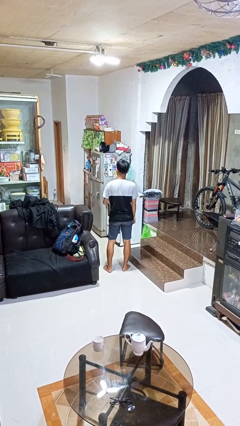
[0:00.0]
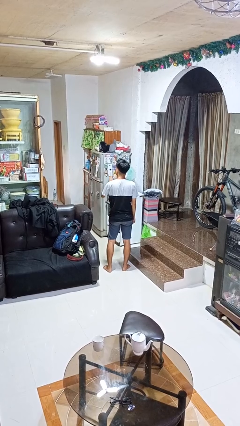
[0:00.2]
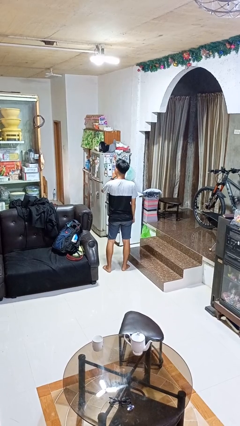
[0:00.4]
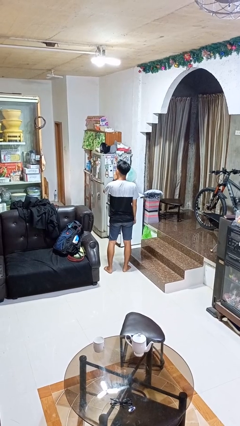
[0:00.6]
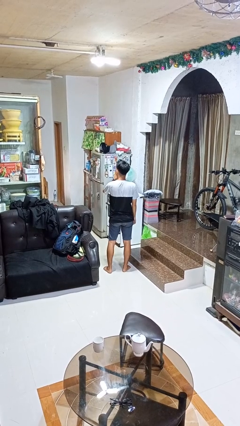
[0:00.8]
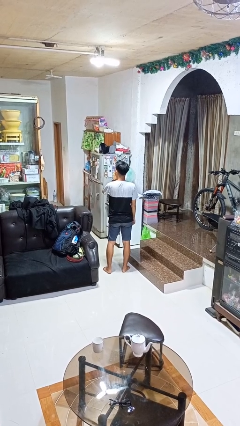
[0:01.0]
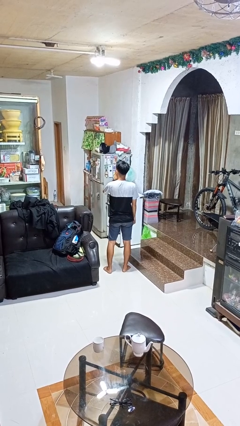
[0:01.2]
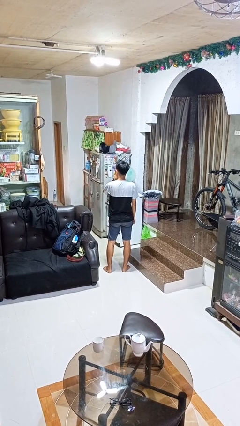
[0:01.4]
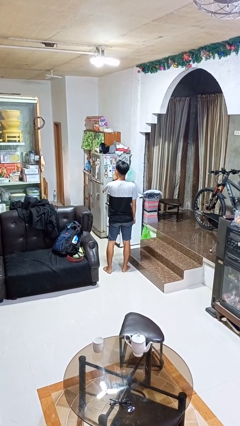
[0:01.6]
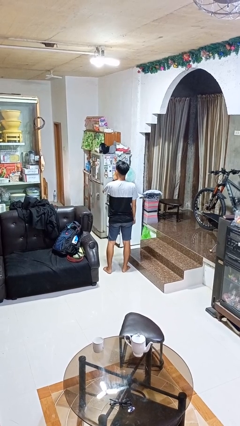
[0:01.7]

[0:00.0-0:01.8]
person gestures be quiet

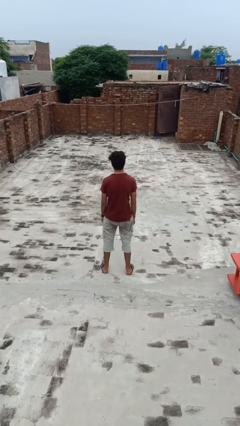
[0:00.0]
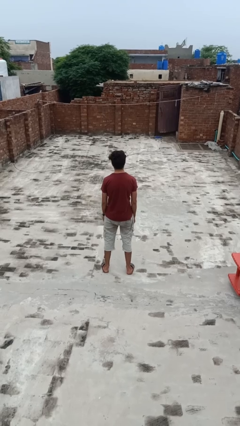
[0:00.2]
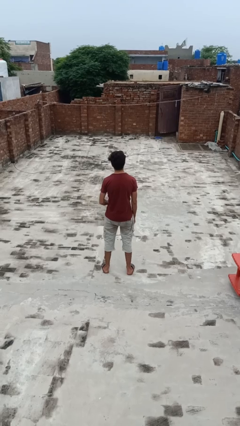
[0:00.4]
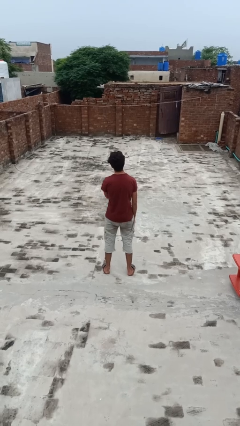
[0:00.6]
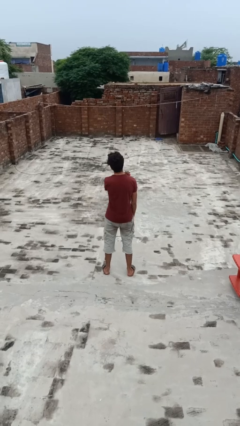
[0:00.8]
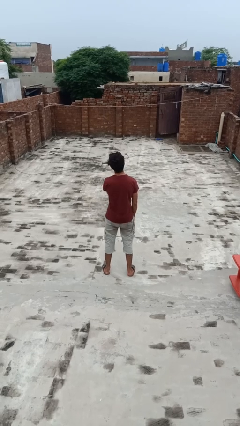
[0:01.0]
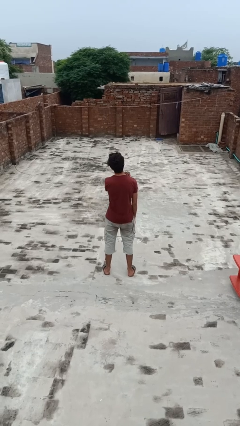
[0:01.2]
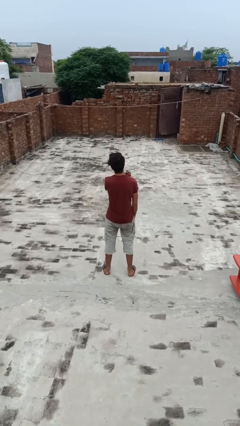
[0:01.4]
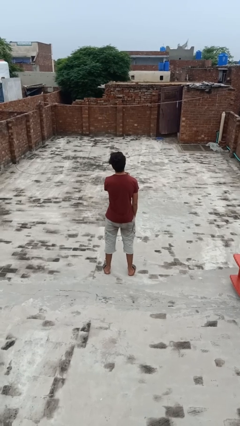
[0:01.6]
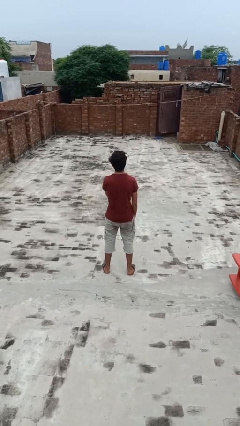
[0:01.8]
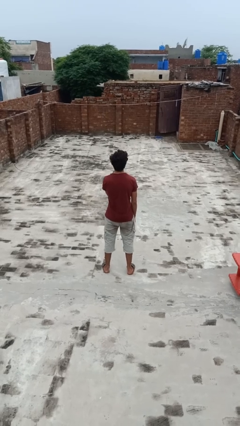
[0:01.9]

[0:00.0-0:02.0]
person strokes chin

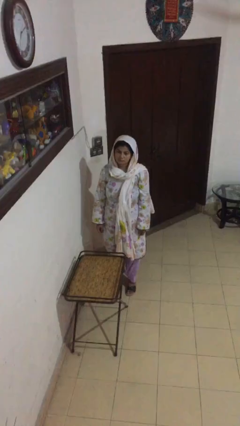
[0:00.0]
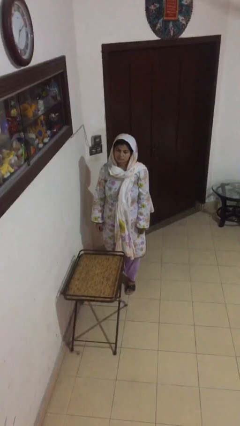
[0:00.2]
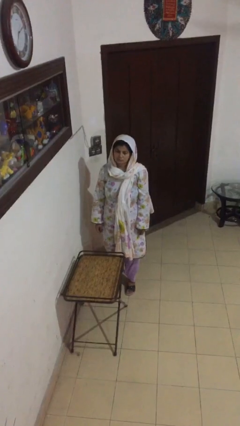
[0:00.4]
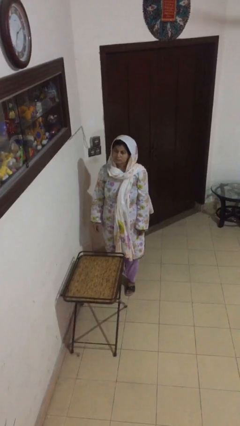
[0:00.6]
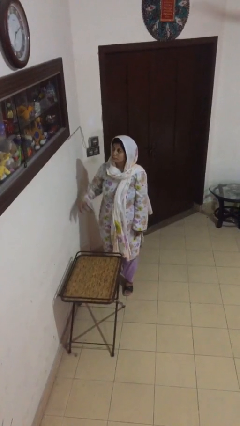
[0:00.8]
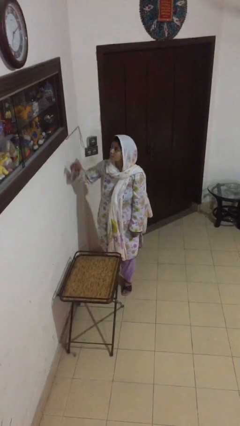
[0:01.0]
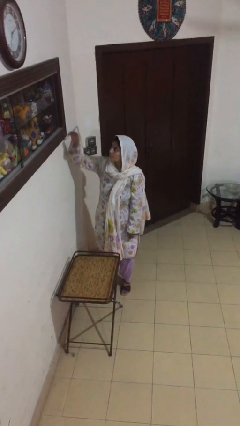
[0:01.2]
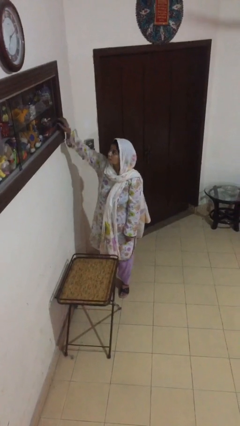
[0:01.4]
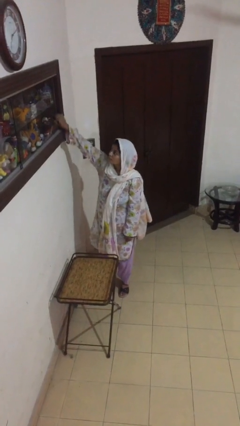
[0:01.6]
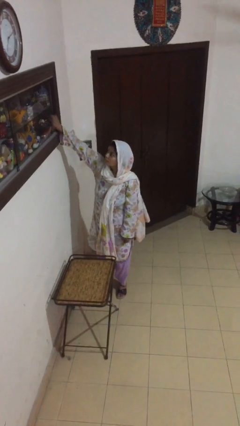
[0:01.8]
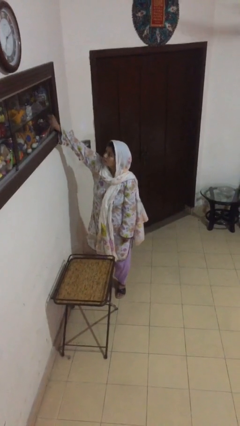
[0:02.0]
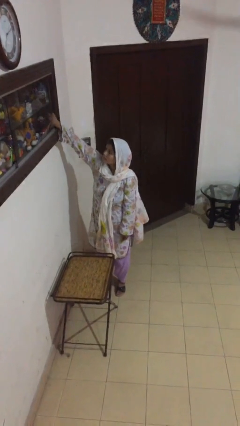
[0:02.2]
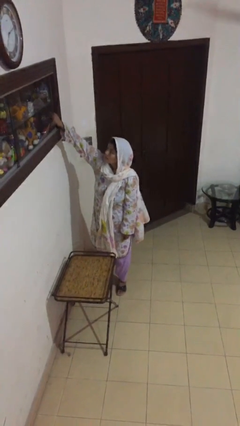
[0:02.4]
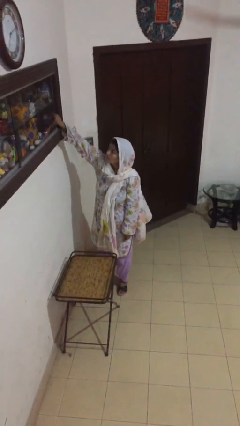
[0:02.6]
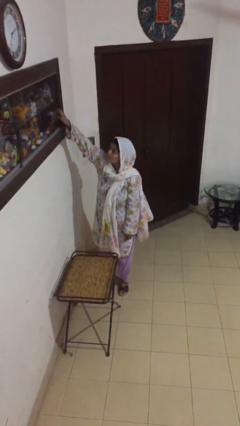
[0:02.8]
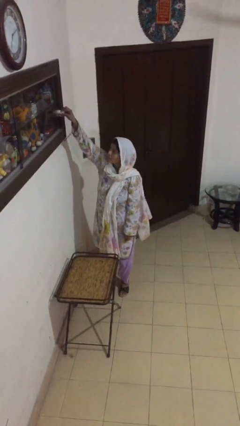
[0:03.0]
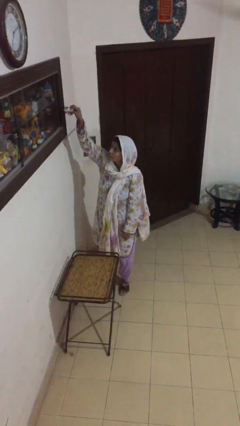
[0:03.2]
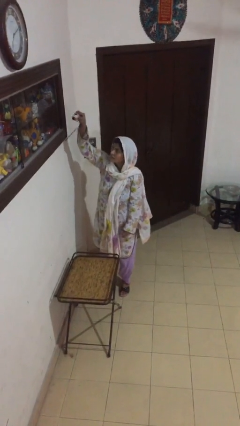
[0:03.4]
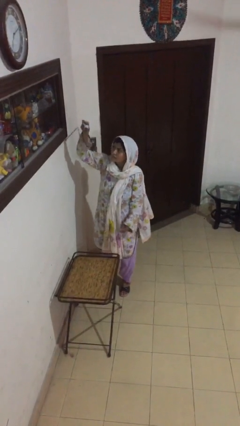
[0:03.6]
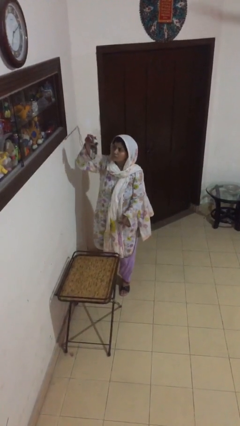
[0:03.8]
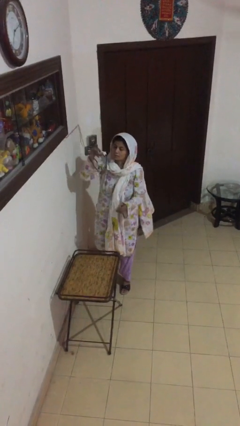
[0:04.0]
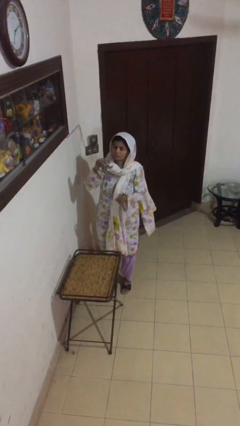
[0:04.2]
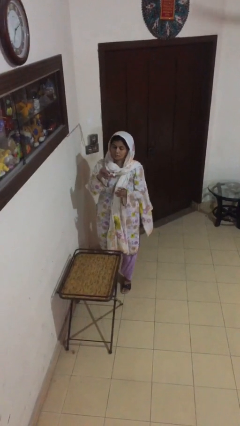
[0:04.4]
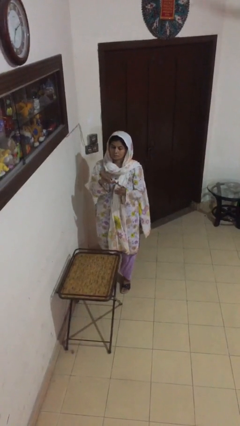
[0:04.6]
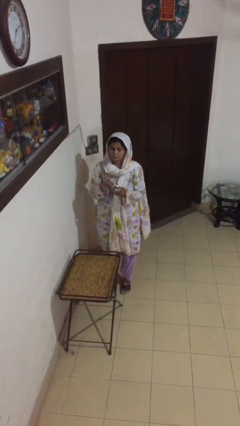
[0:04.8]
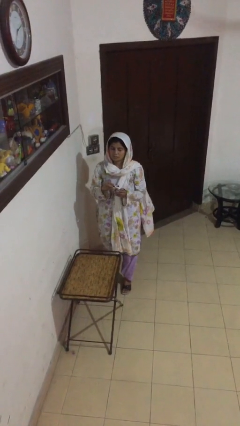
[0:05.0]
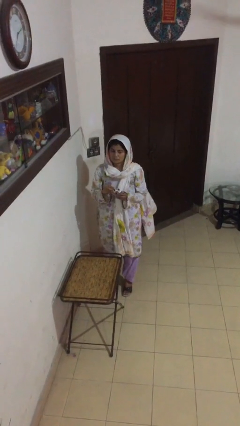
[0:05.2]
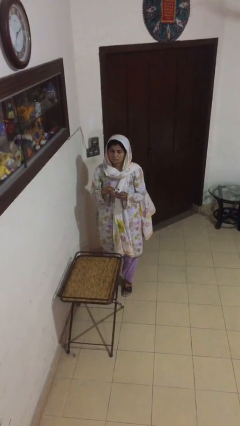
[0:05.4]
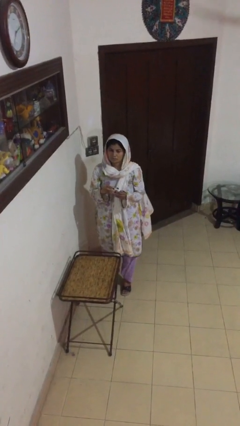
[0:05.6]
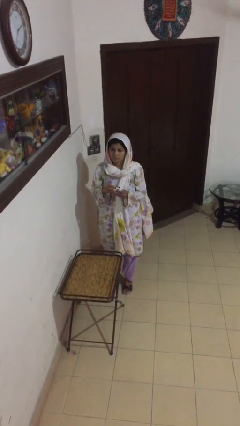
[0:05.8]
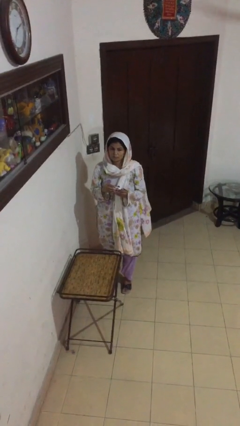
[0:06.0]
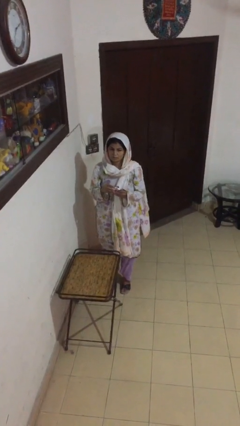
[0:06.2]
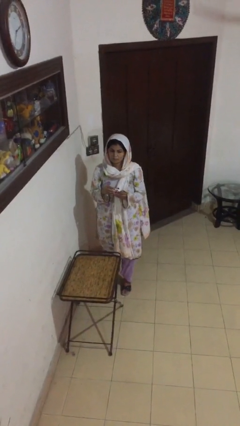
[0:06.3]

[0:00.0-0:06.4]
person picks up object from shelf

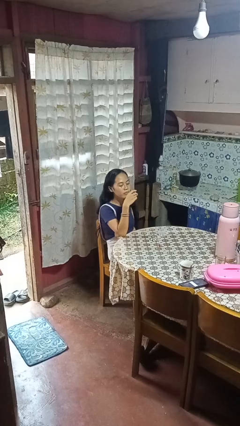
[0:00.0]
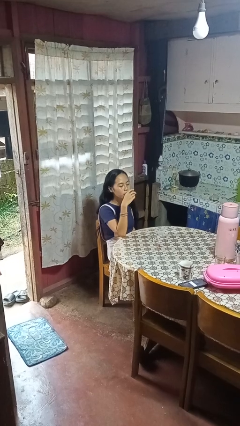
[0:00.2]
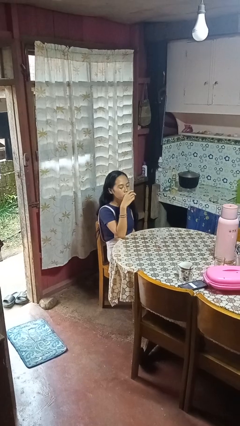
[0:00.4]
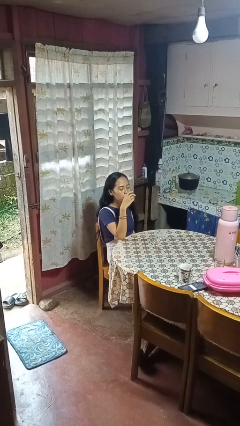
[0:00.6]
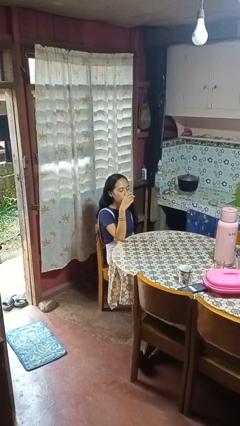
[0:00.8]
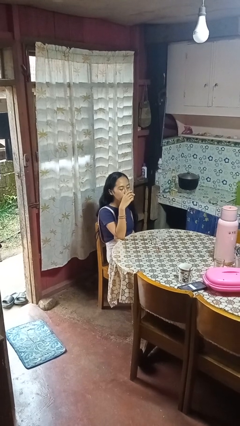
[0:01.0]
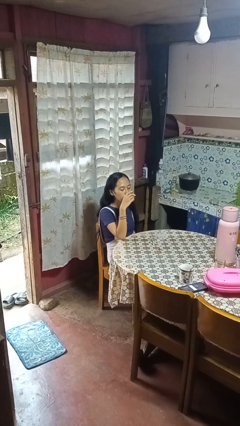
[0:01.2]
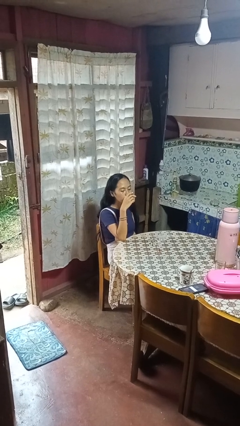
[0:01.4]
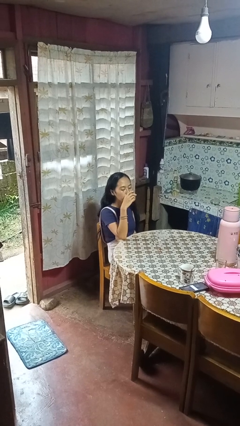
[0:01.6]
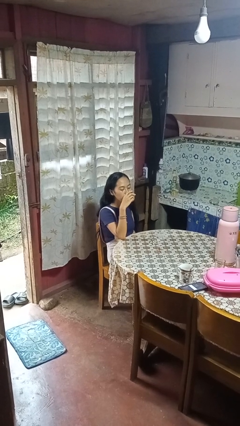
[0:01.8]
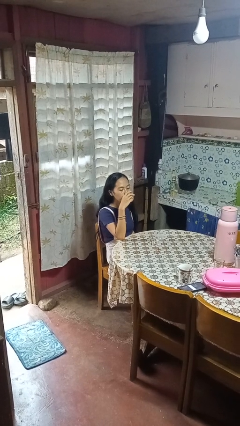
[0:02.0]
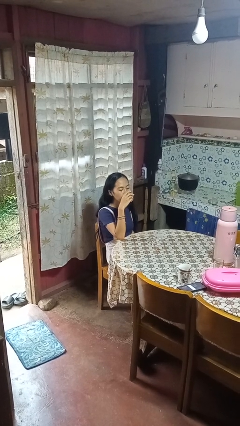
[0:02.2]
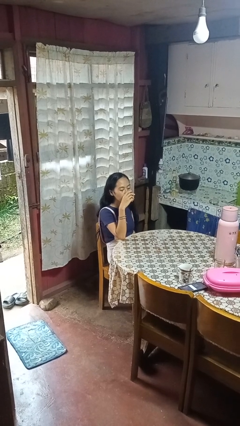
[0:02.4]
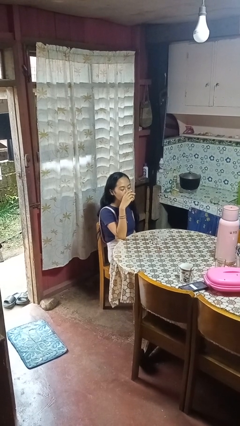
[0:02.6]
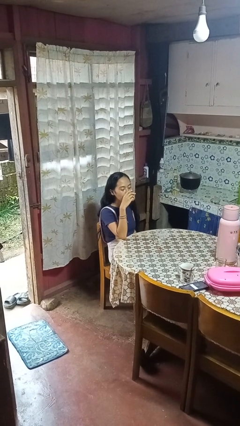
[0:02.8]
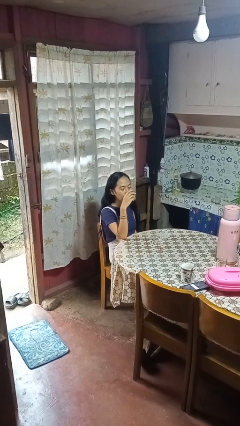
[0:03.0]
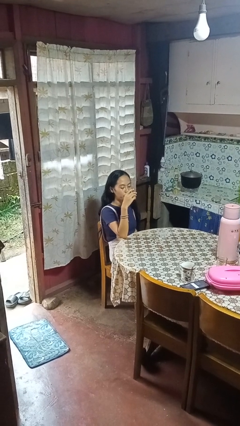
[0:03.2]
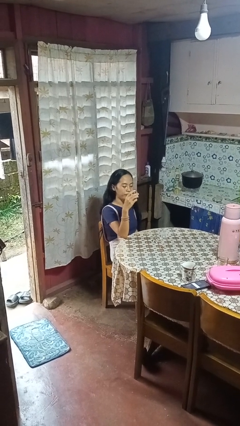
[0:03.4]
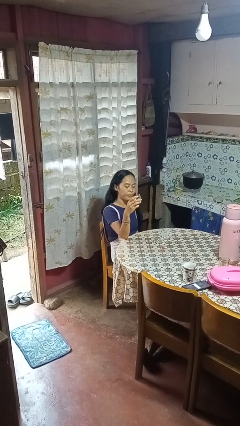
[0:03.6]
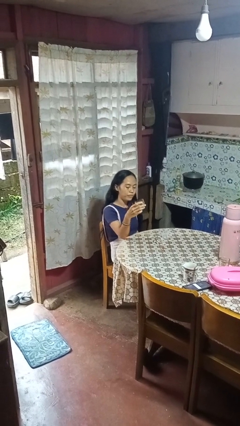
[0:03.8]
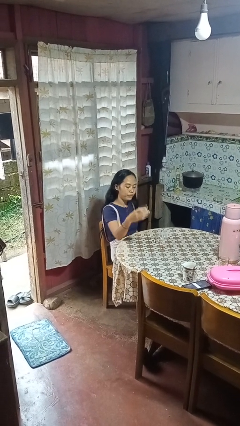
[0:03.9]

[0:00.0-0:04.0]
person drinks from shotglass

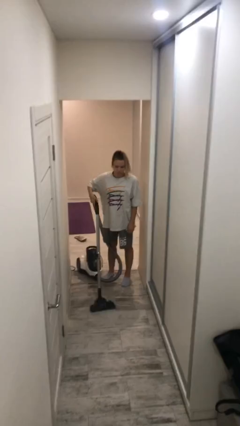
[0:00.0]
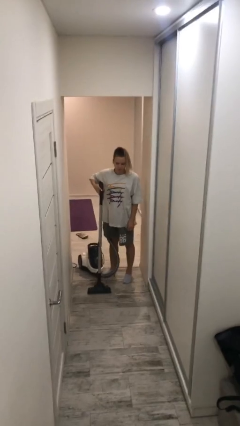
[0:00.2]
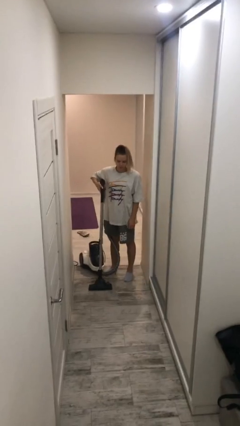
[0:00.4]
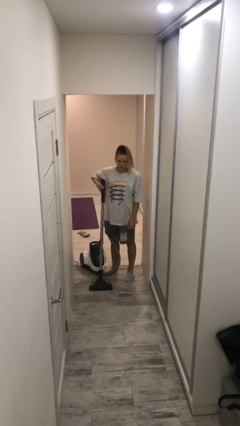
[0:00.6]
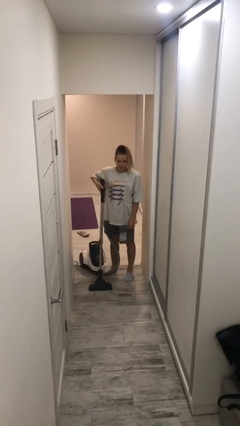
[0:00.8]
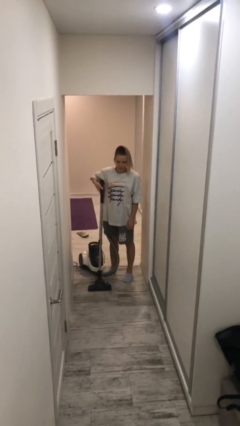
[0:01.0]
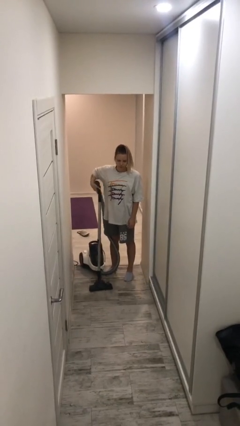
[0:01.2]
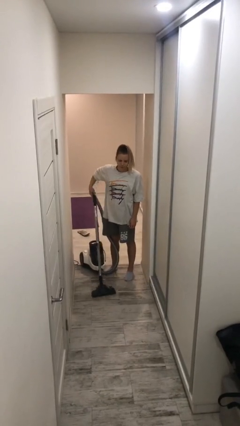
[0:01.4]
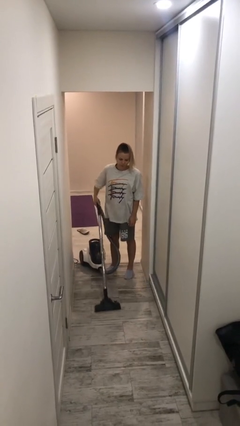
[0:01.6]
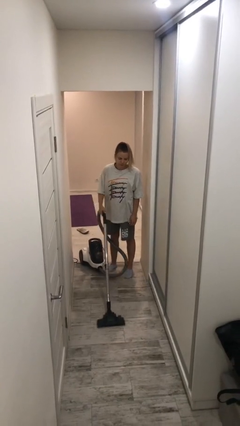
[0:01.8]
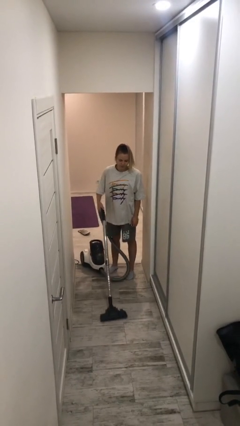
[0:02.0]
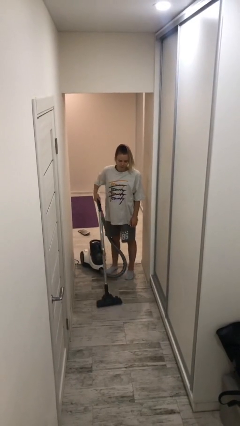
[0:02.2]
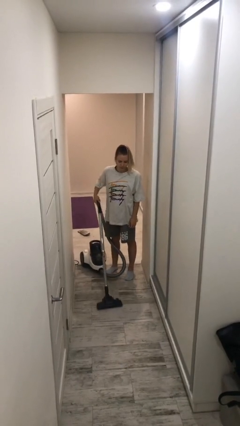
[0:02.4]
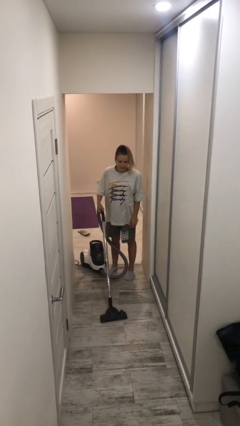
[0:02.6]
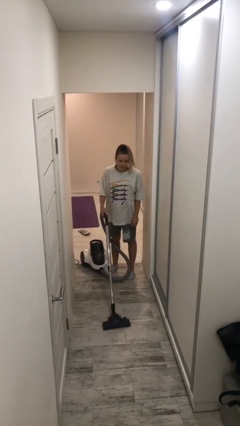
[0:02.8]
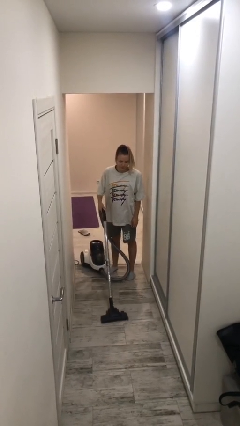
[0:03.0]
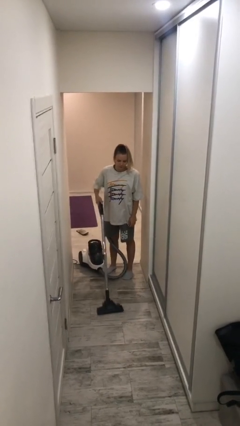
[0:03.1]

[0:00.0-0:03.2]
person vacuums carpet

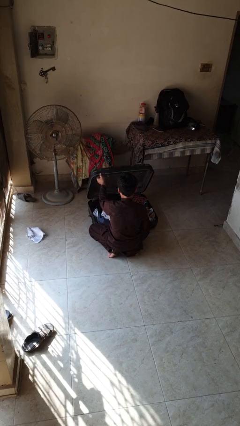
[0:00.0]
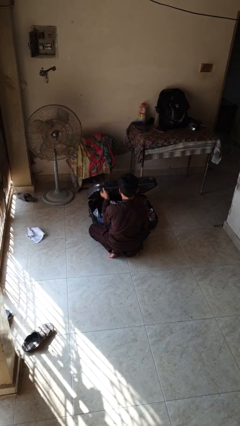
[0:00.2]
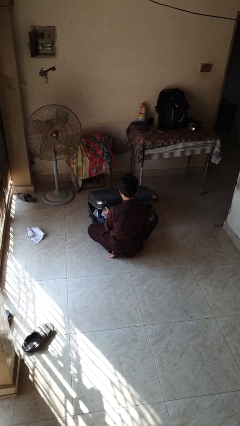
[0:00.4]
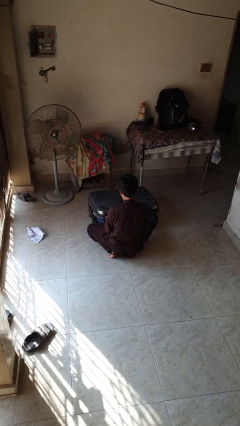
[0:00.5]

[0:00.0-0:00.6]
person closes suitcase
